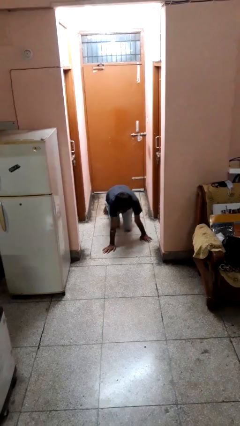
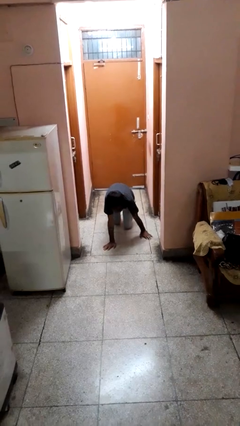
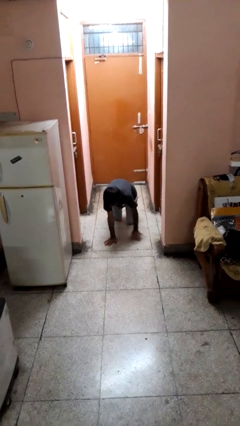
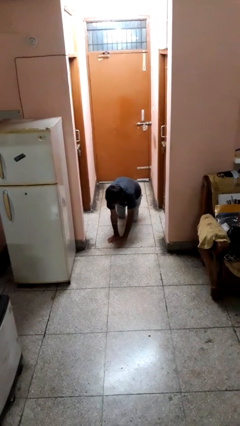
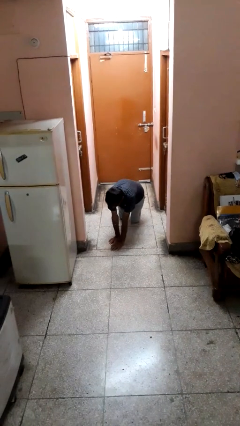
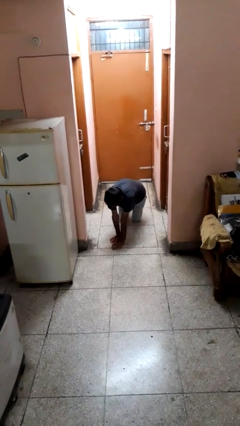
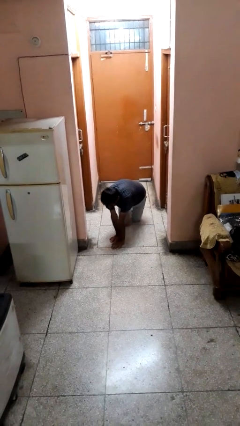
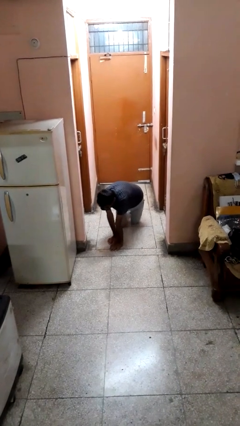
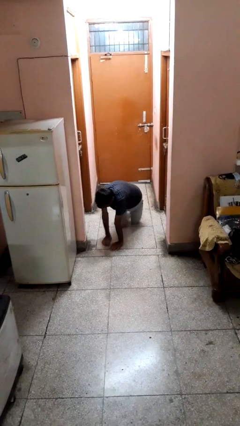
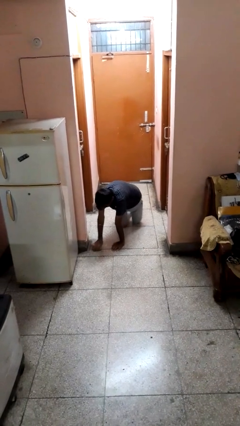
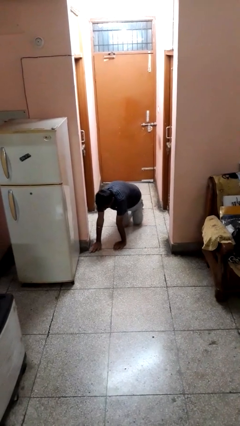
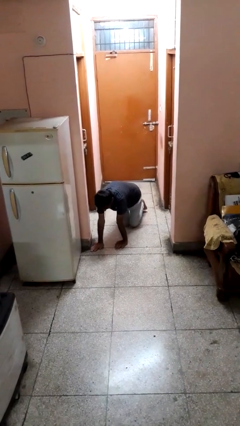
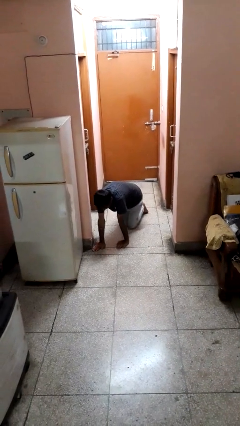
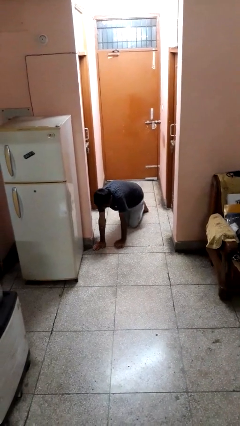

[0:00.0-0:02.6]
person crawls

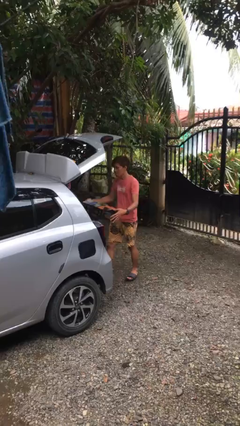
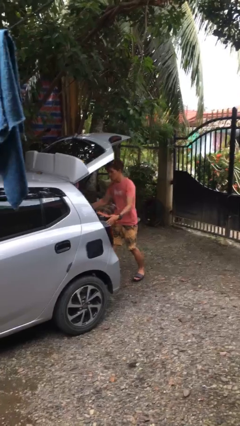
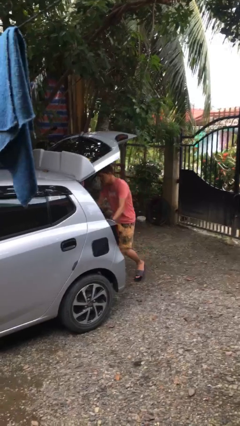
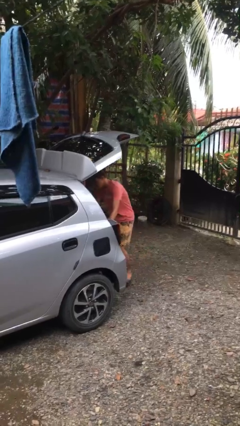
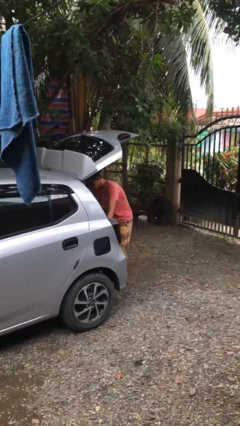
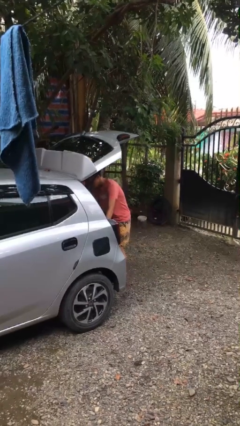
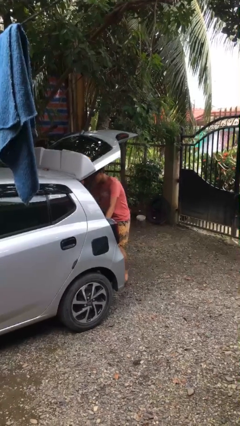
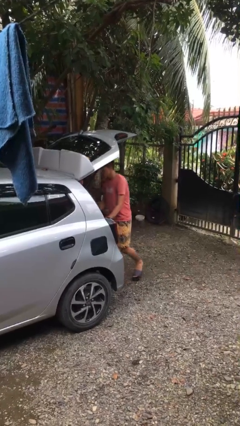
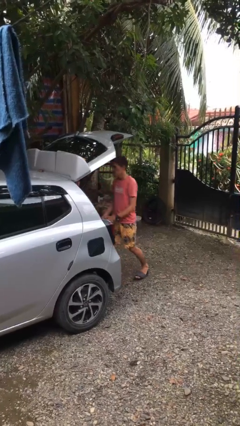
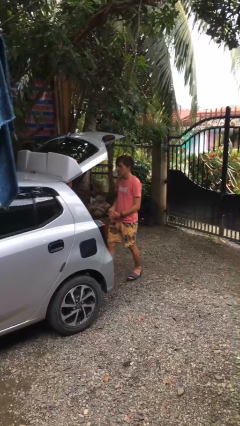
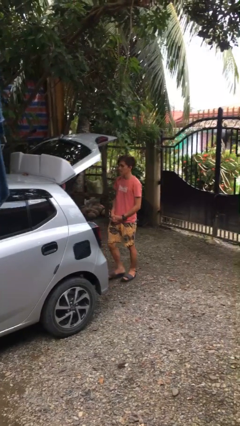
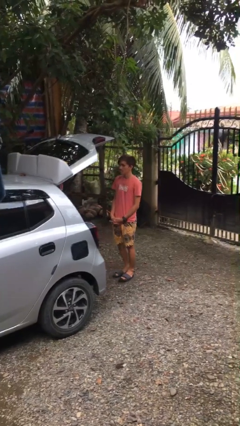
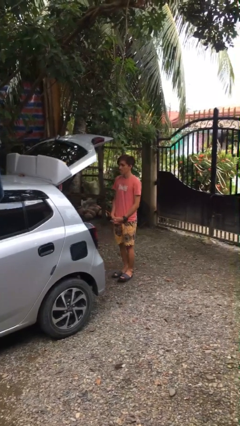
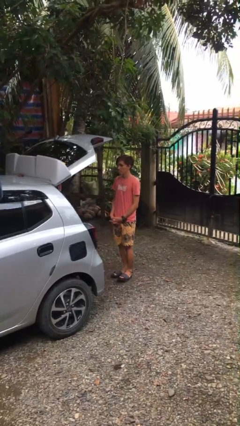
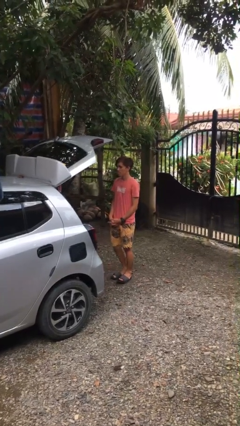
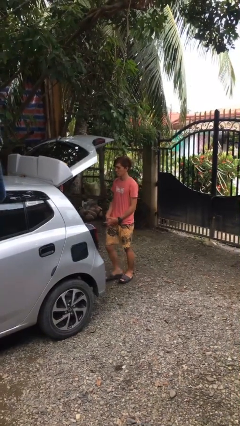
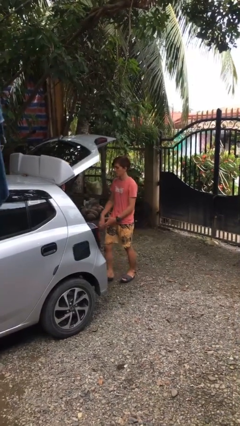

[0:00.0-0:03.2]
person loads car

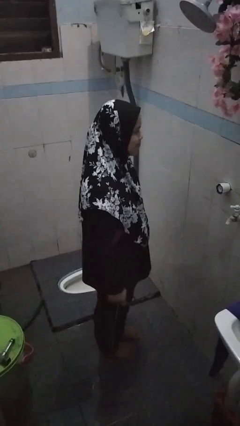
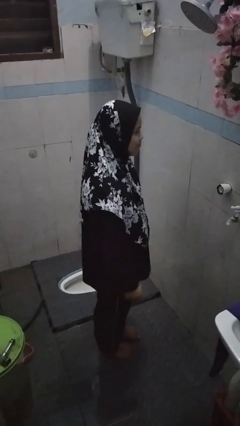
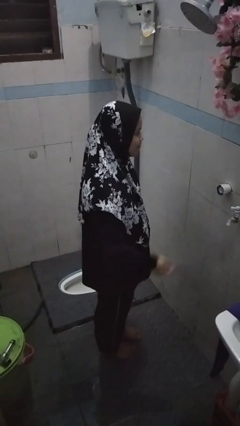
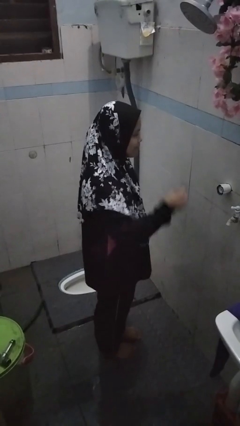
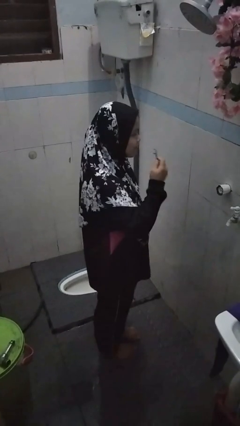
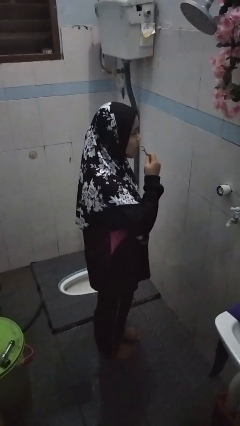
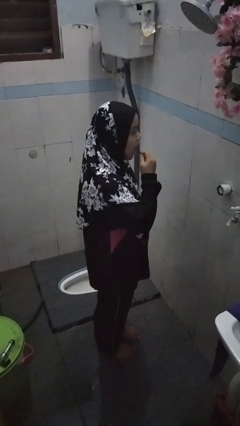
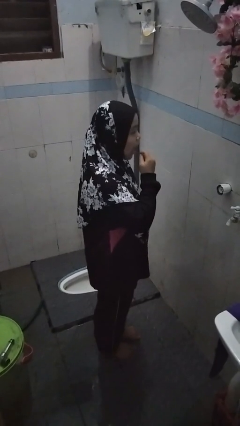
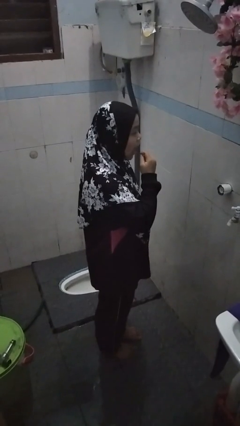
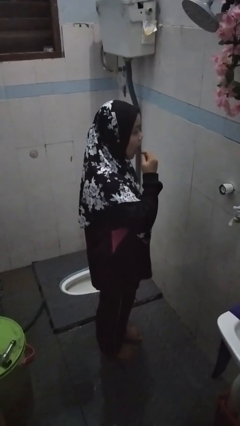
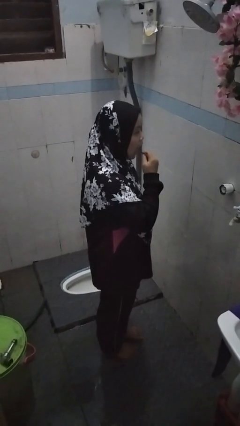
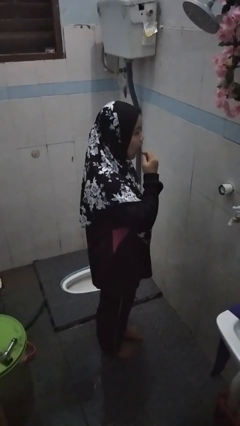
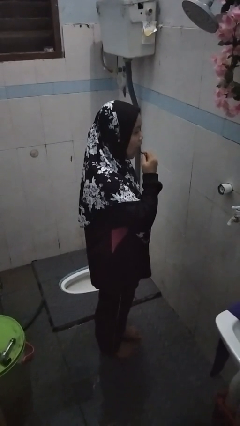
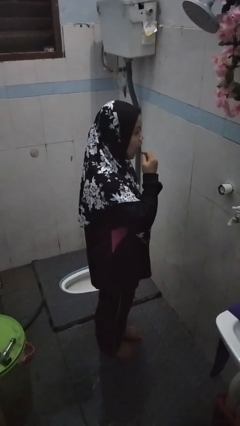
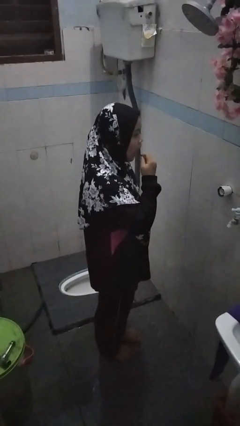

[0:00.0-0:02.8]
person flosses

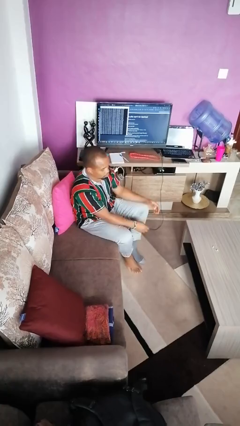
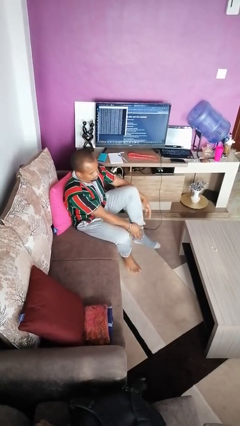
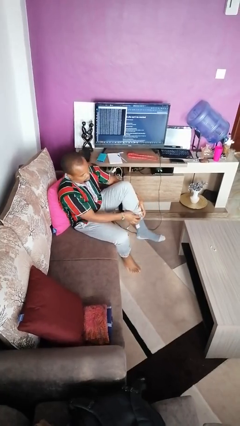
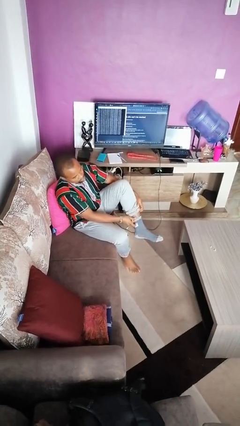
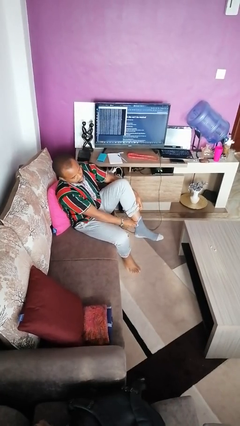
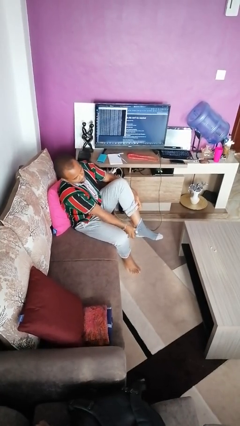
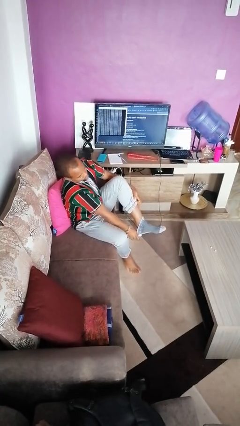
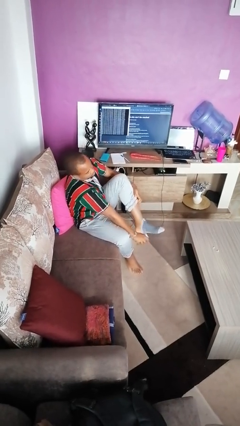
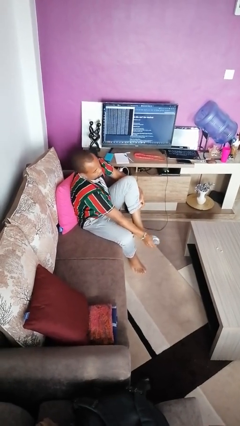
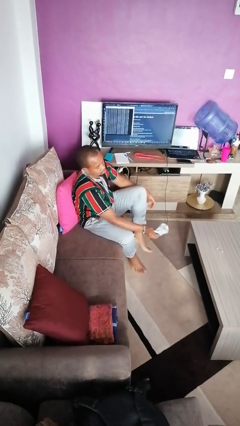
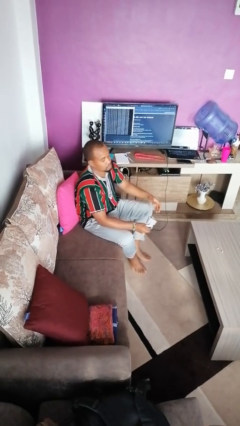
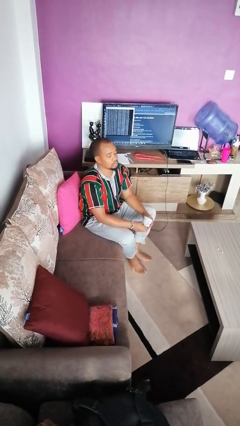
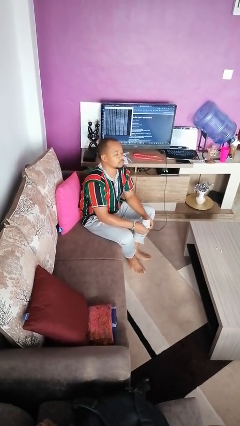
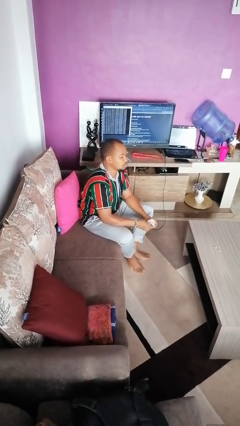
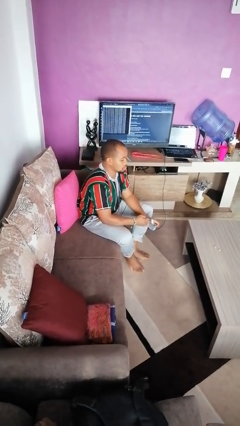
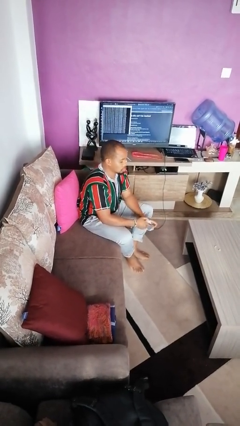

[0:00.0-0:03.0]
person takes off socks

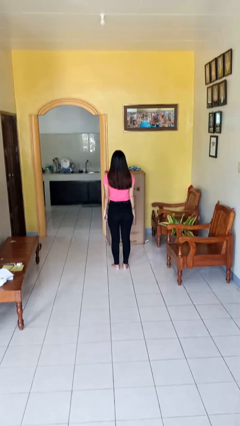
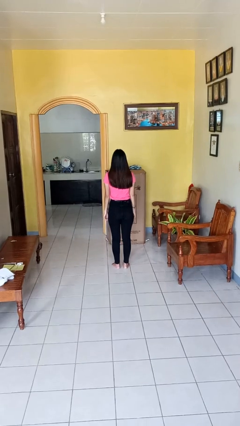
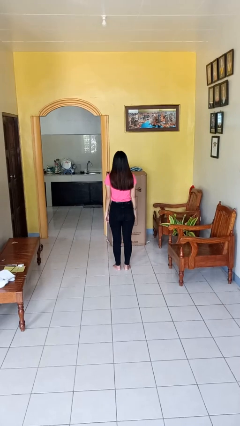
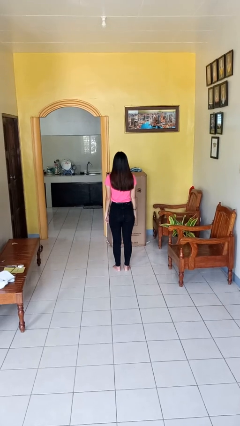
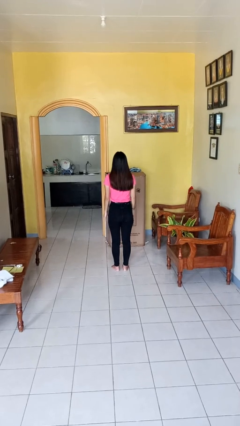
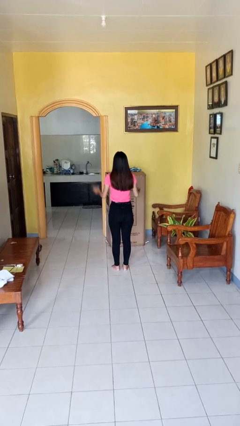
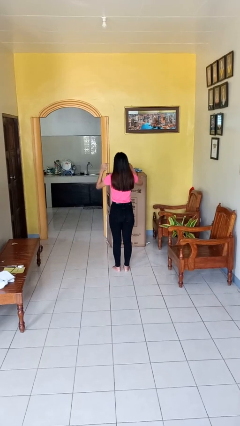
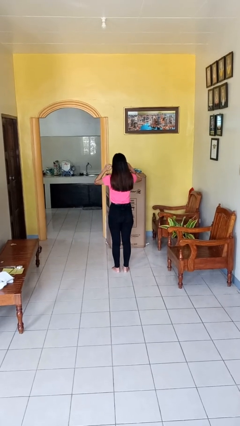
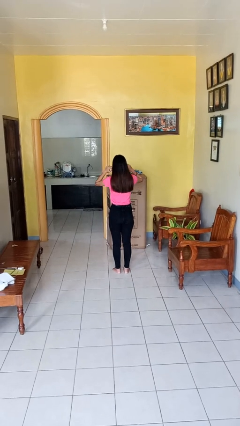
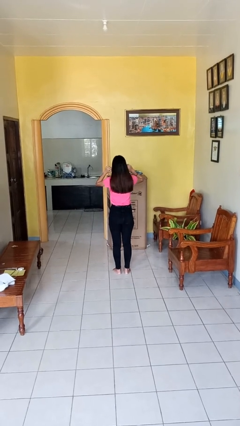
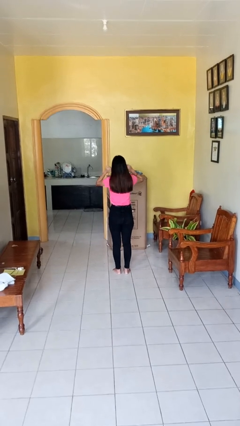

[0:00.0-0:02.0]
person puts fingers in ear

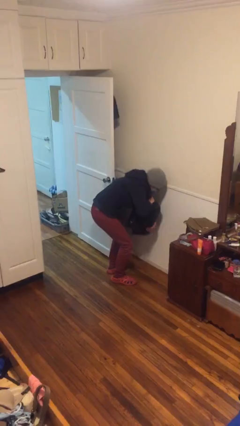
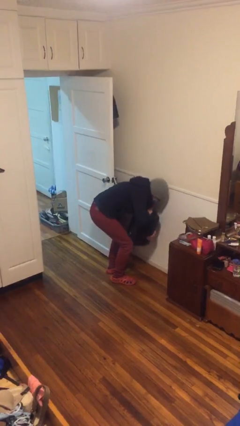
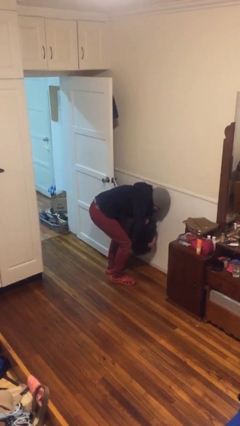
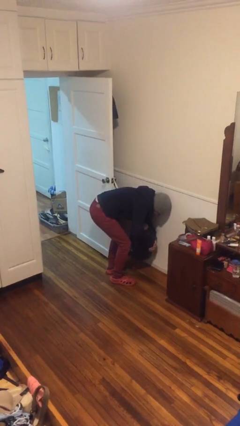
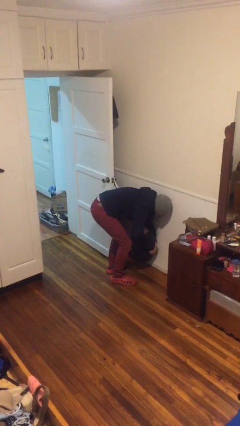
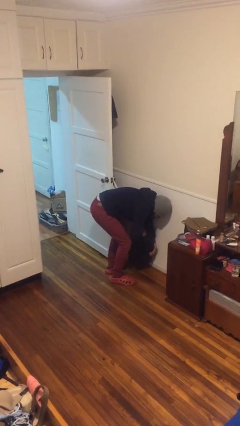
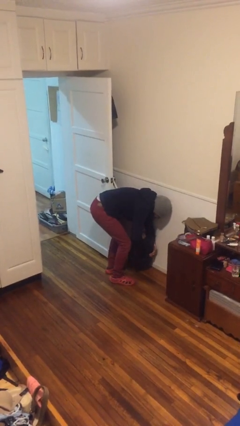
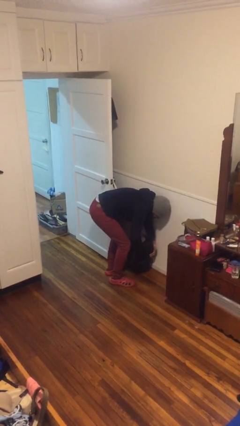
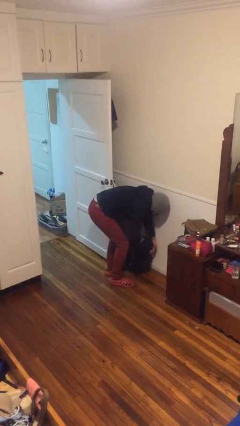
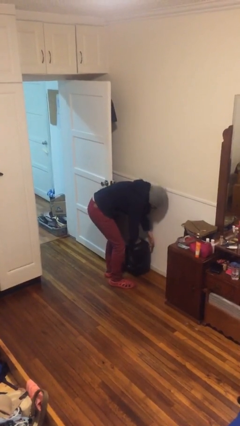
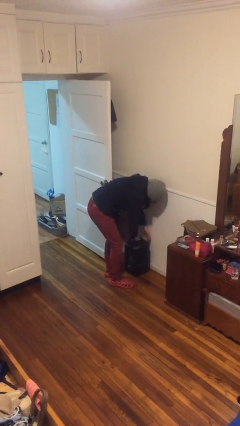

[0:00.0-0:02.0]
person puts down object on floor

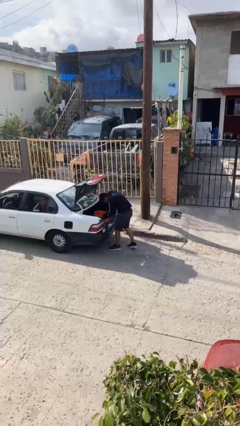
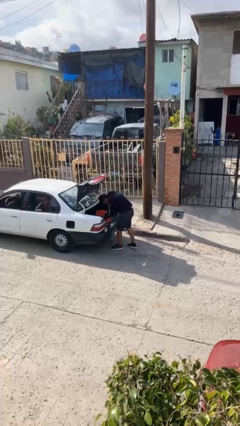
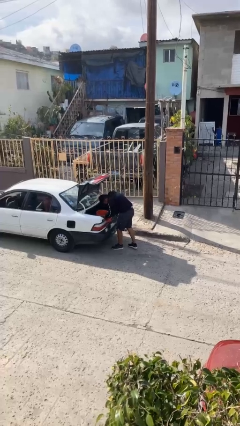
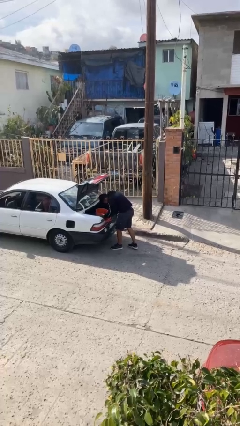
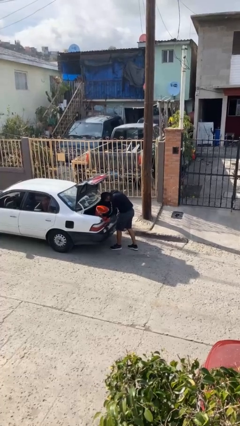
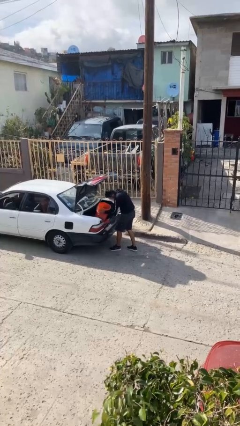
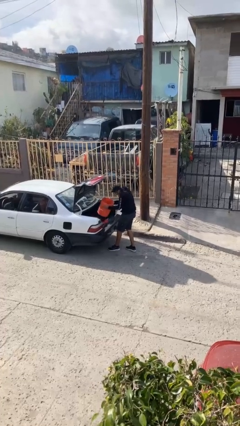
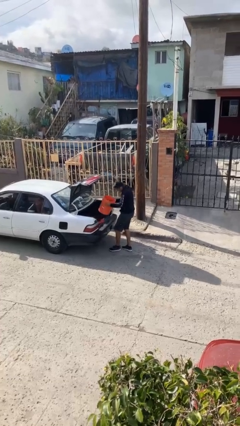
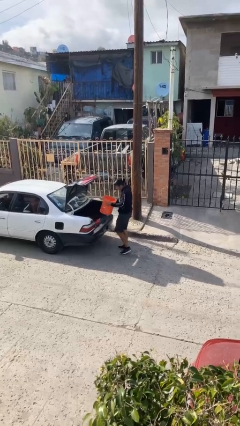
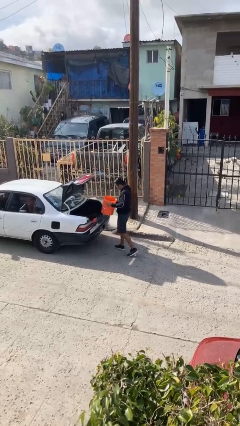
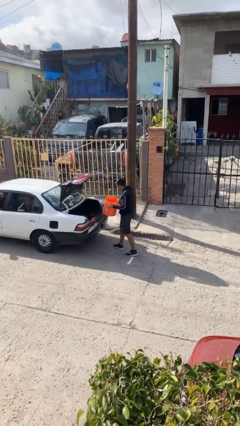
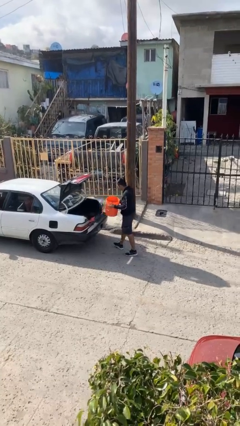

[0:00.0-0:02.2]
person unloads car
